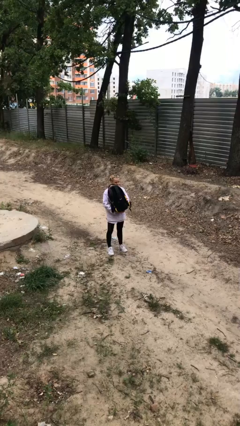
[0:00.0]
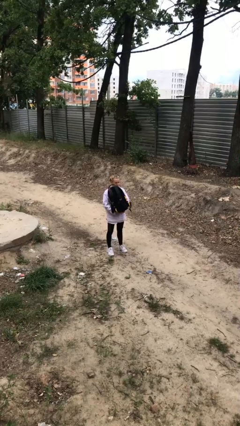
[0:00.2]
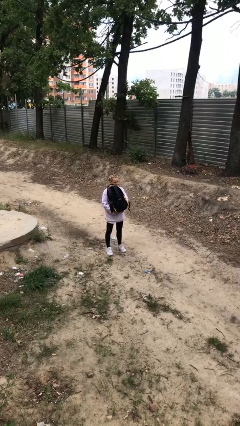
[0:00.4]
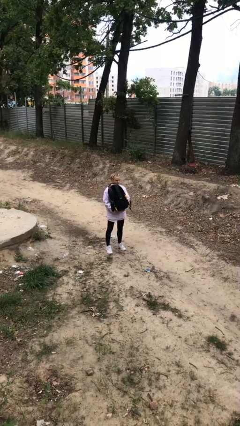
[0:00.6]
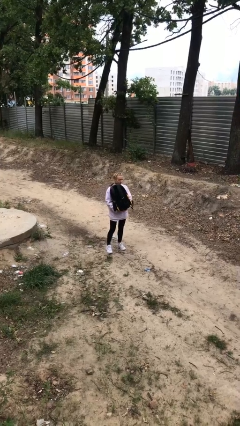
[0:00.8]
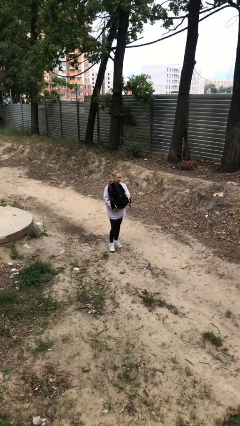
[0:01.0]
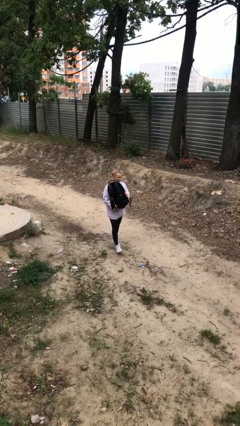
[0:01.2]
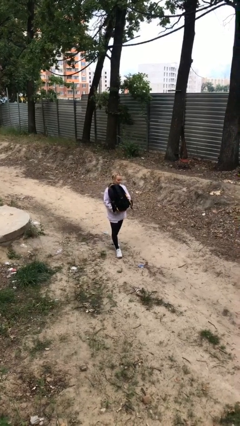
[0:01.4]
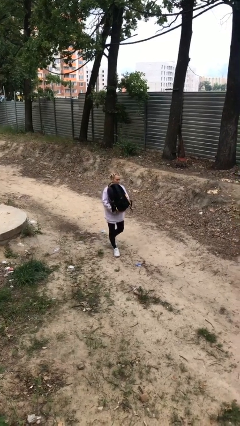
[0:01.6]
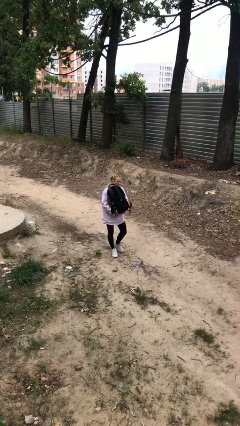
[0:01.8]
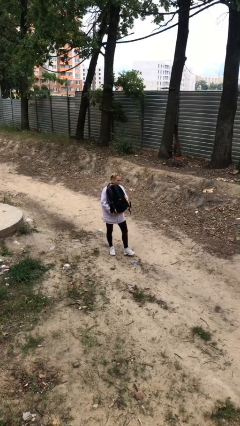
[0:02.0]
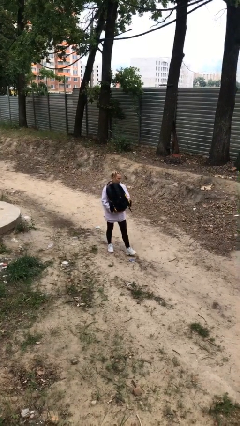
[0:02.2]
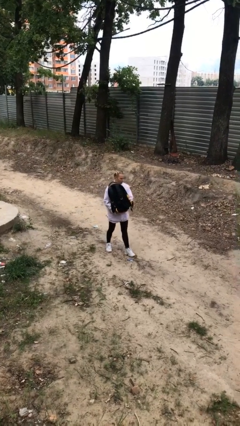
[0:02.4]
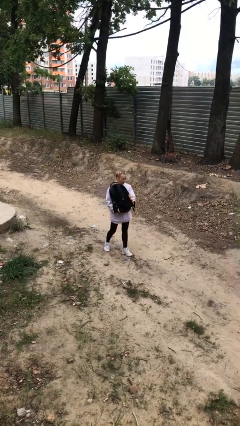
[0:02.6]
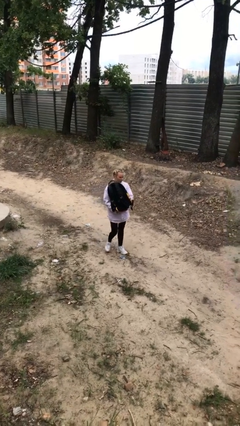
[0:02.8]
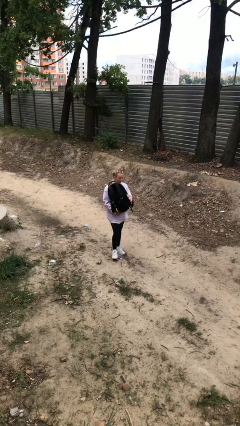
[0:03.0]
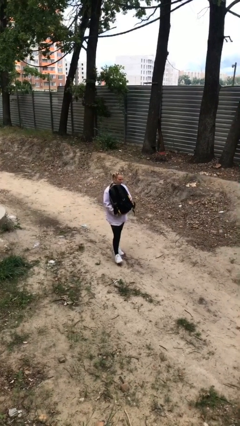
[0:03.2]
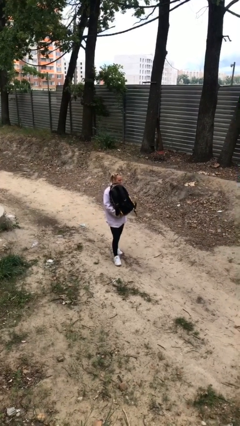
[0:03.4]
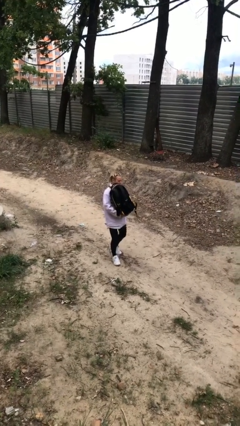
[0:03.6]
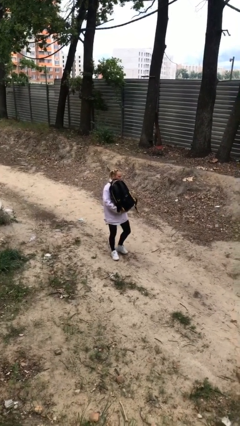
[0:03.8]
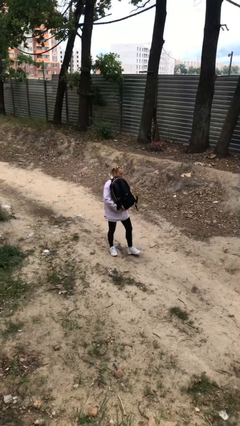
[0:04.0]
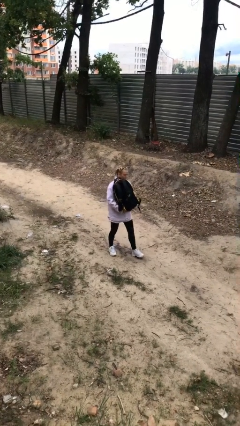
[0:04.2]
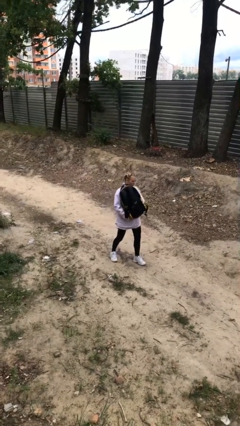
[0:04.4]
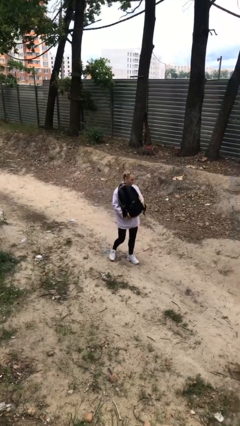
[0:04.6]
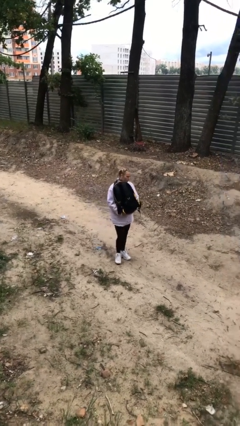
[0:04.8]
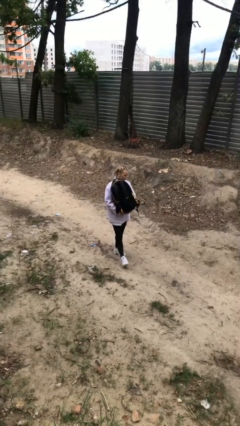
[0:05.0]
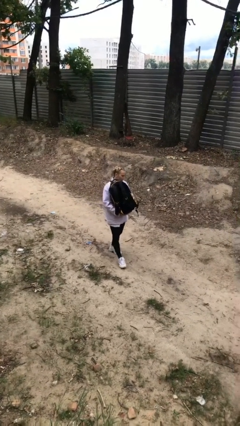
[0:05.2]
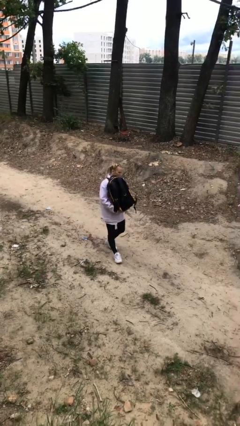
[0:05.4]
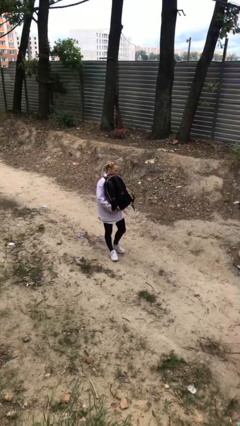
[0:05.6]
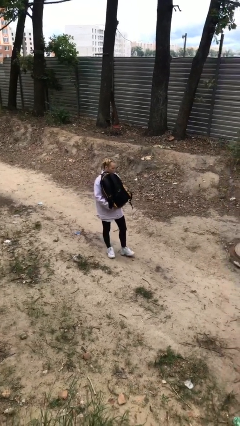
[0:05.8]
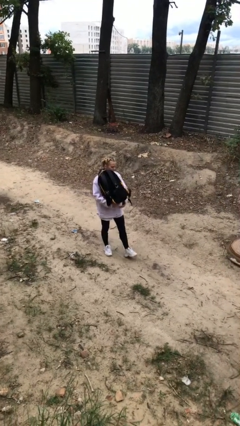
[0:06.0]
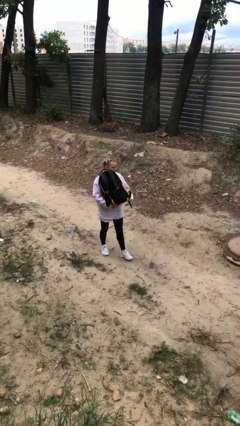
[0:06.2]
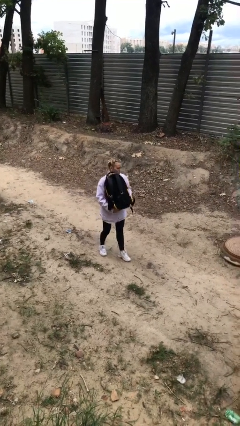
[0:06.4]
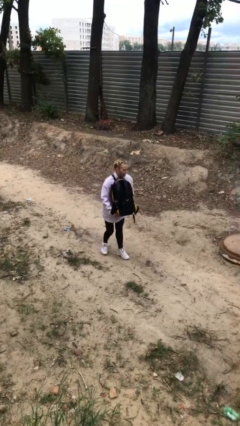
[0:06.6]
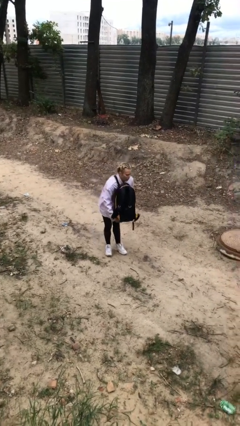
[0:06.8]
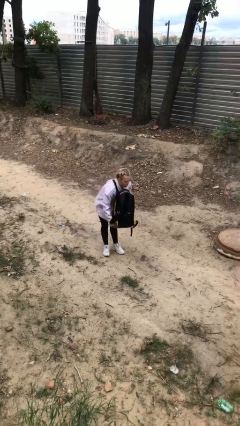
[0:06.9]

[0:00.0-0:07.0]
person carries heavy object

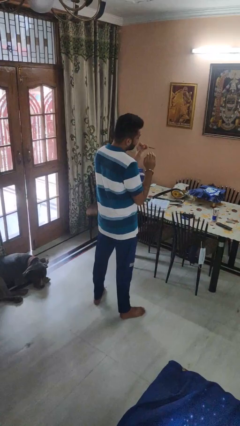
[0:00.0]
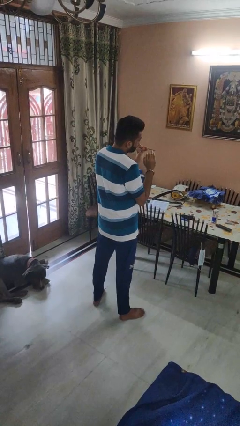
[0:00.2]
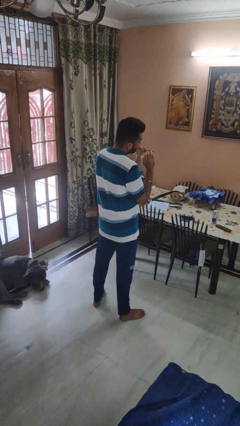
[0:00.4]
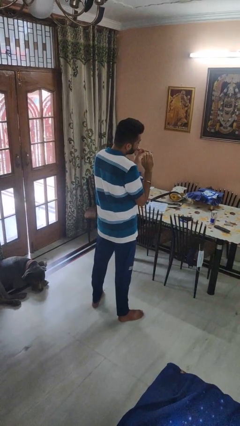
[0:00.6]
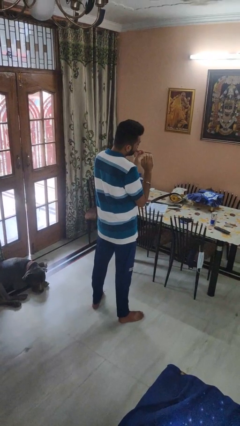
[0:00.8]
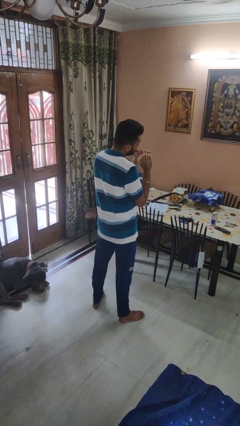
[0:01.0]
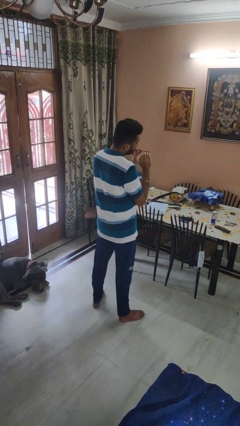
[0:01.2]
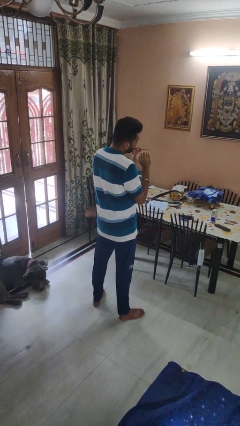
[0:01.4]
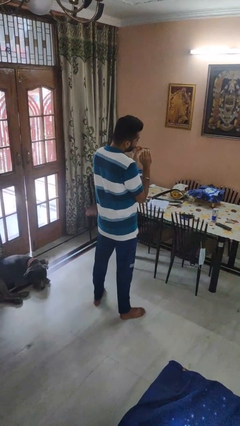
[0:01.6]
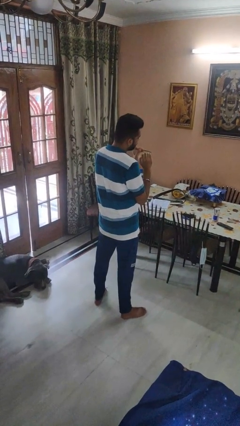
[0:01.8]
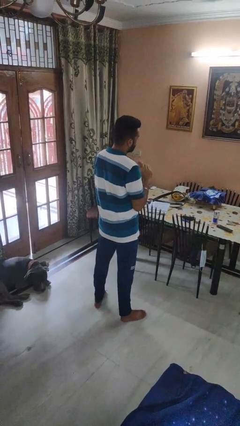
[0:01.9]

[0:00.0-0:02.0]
person files fingernails

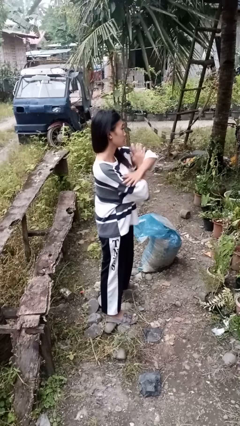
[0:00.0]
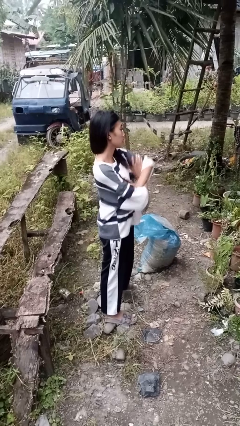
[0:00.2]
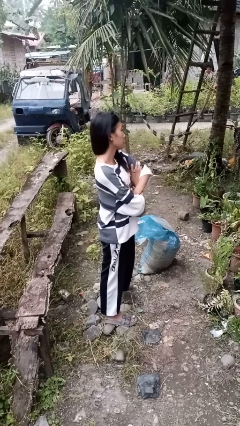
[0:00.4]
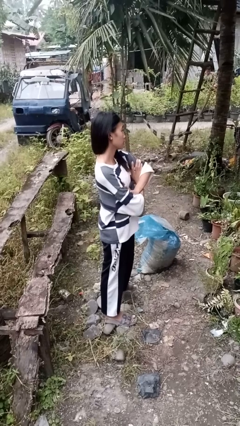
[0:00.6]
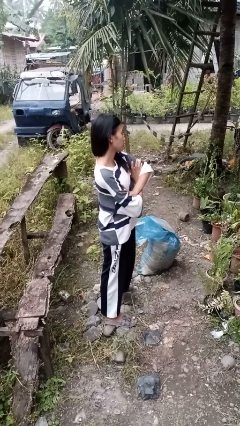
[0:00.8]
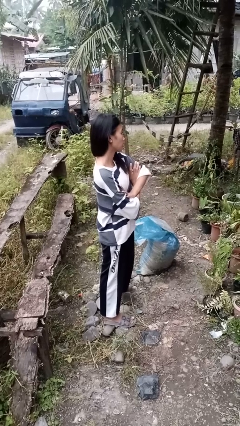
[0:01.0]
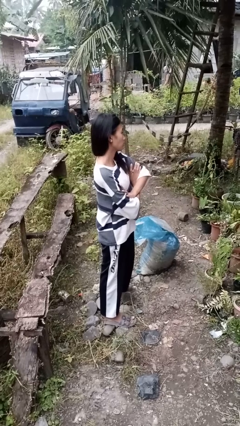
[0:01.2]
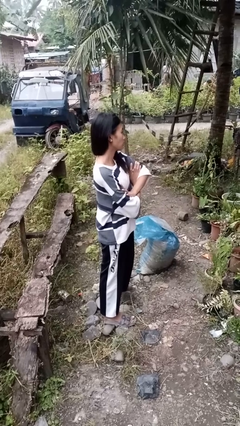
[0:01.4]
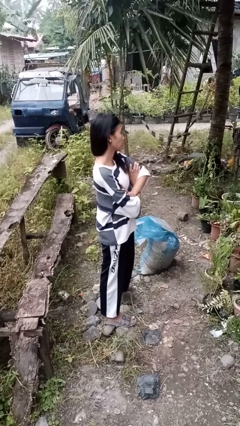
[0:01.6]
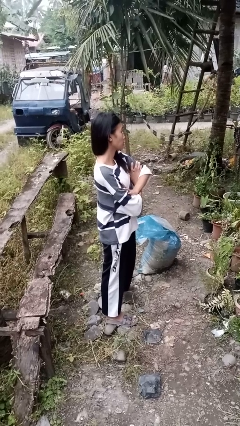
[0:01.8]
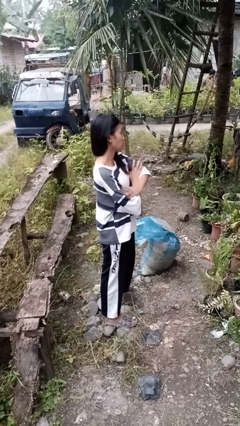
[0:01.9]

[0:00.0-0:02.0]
person crosses arms

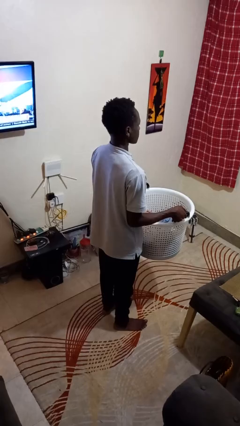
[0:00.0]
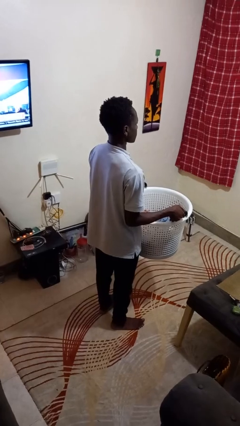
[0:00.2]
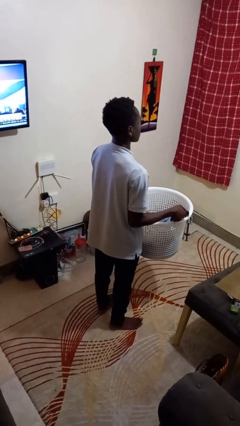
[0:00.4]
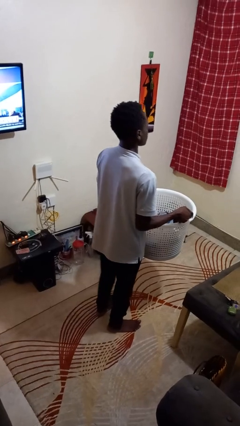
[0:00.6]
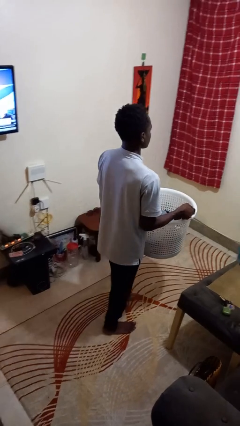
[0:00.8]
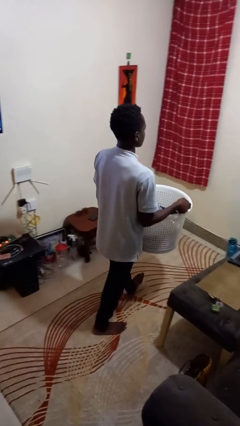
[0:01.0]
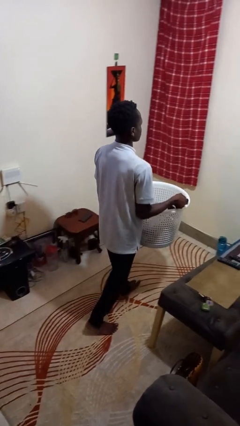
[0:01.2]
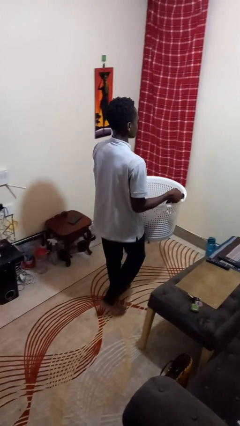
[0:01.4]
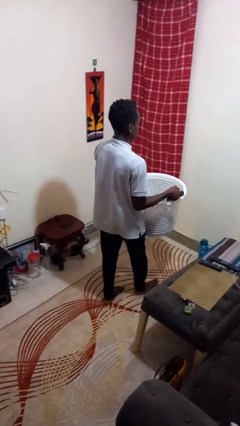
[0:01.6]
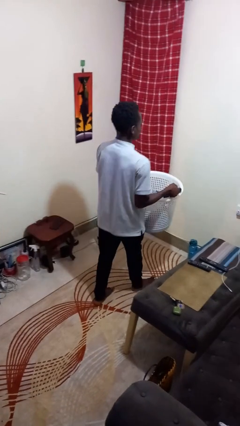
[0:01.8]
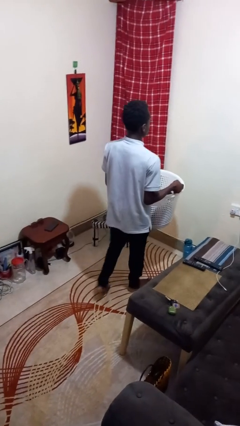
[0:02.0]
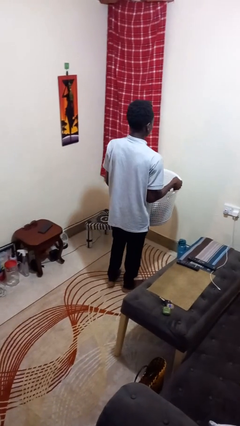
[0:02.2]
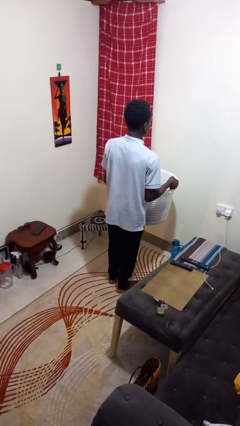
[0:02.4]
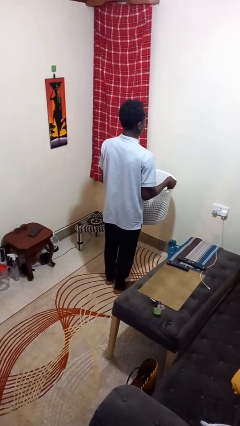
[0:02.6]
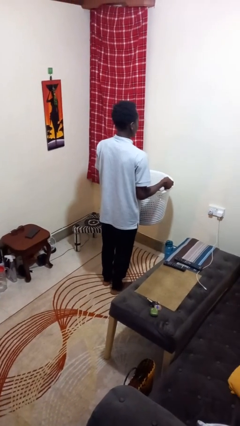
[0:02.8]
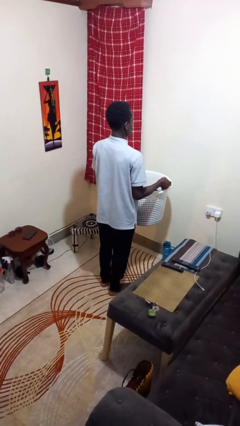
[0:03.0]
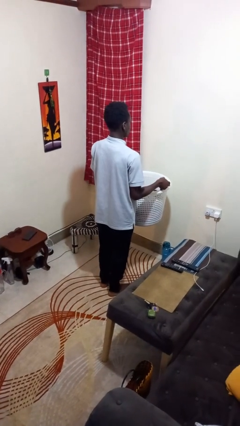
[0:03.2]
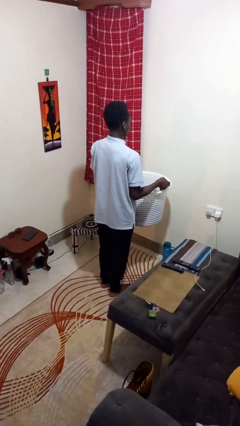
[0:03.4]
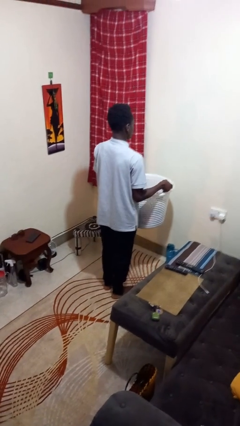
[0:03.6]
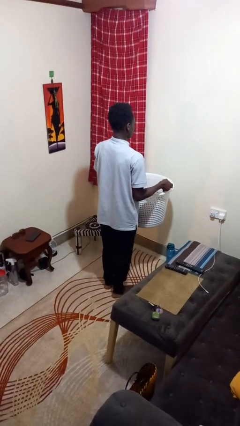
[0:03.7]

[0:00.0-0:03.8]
person carries laundry basket

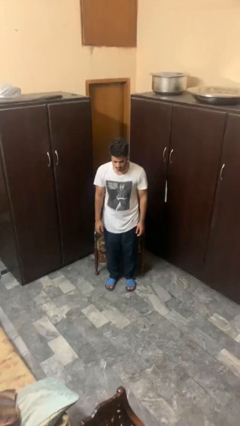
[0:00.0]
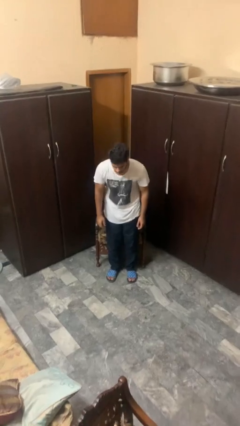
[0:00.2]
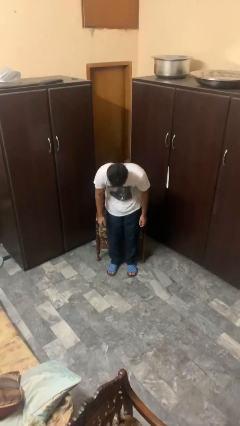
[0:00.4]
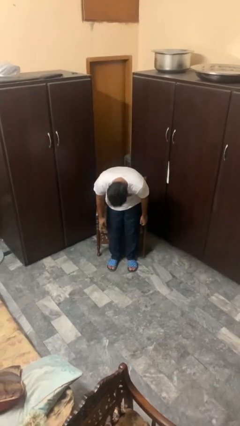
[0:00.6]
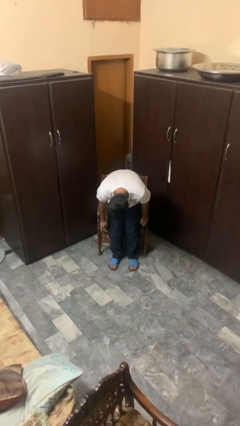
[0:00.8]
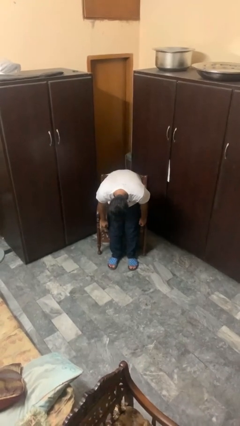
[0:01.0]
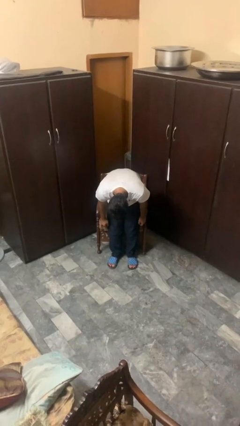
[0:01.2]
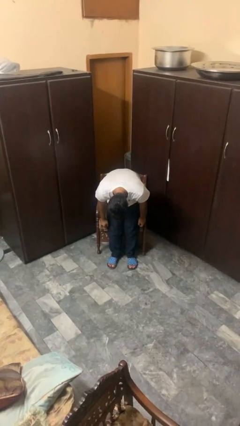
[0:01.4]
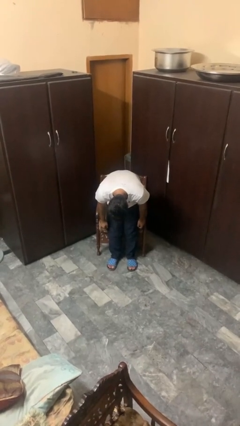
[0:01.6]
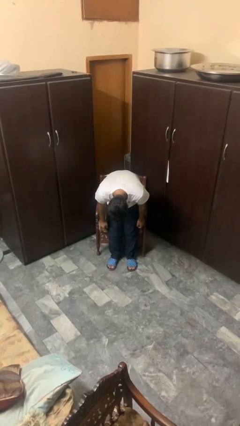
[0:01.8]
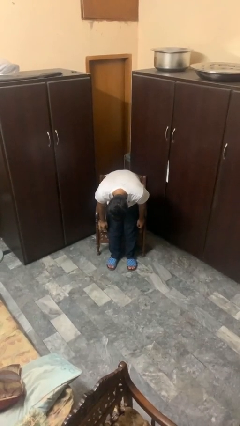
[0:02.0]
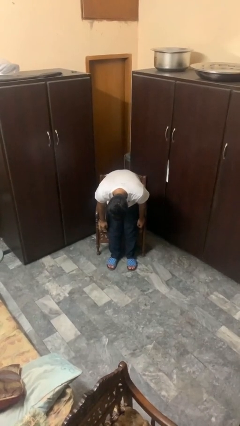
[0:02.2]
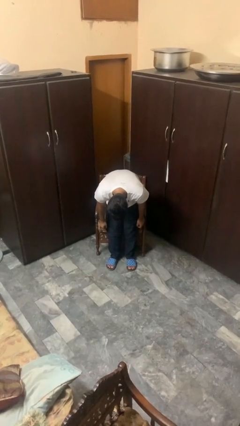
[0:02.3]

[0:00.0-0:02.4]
person bows

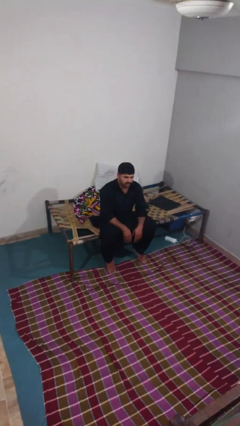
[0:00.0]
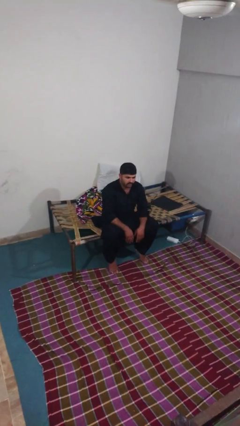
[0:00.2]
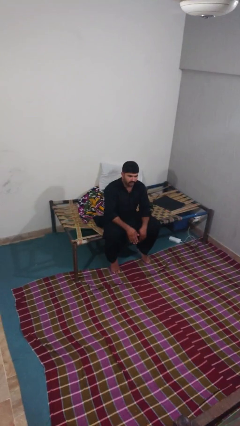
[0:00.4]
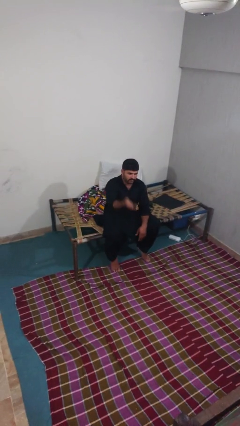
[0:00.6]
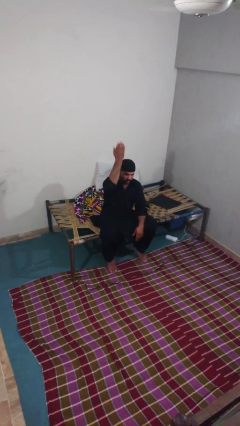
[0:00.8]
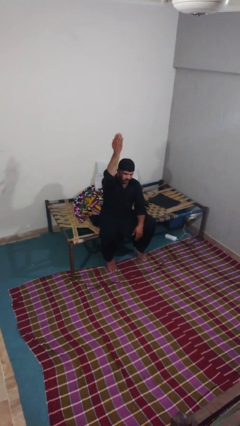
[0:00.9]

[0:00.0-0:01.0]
person gestures swipe up
